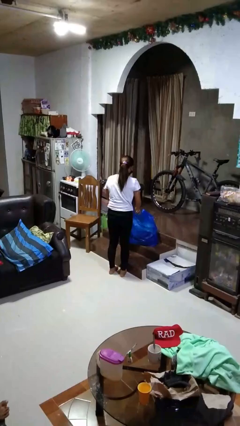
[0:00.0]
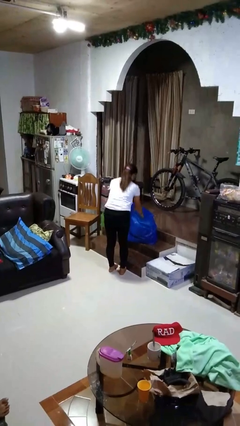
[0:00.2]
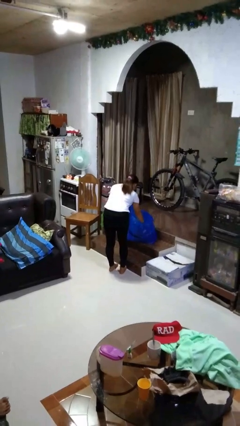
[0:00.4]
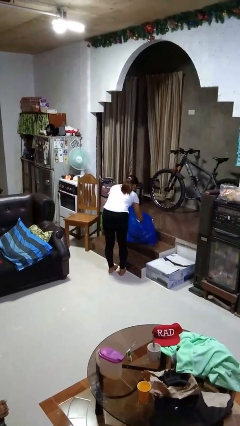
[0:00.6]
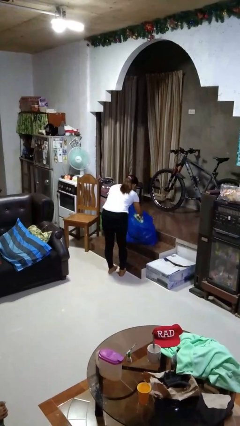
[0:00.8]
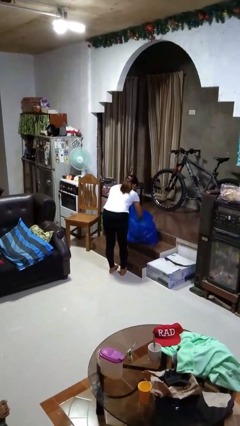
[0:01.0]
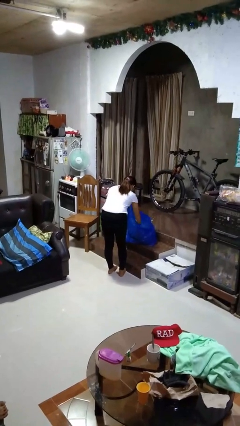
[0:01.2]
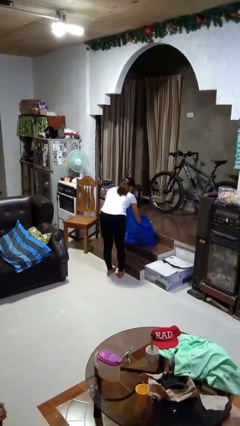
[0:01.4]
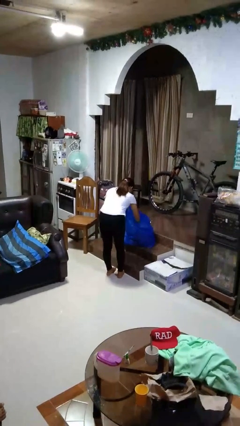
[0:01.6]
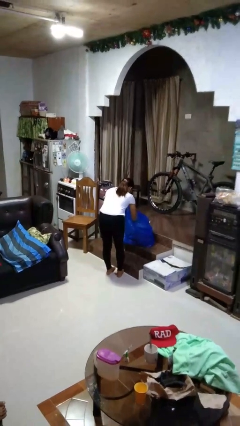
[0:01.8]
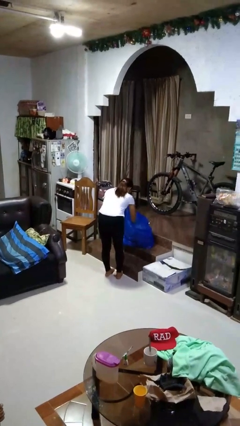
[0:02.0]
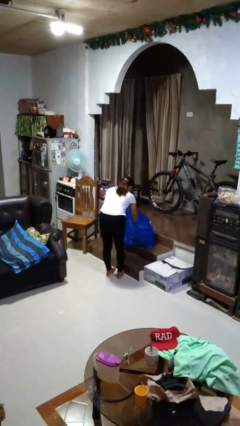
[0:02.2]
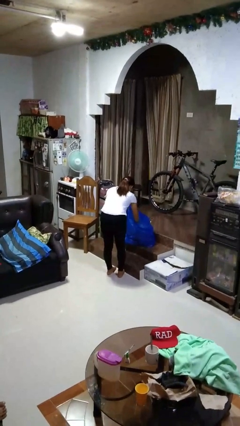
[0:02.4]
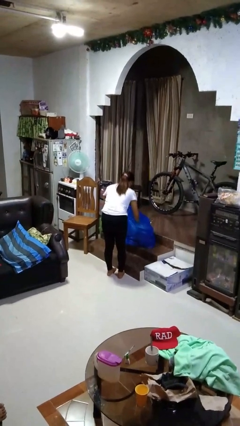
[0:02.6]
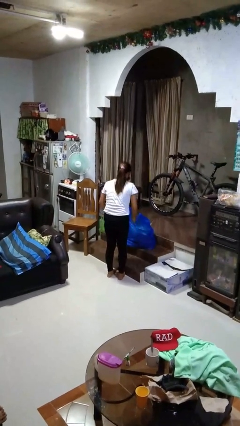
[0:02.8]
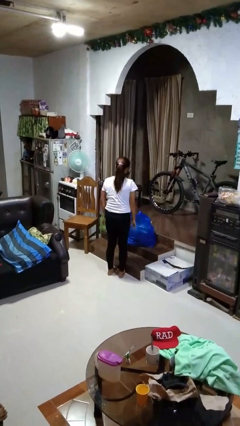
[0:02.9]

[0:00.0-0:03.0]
person searches in bag

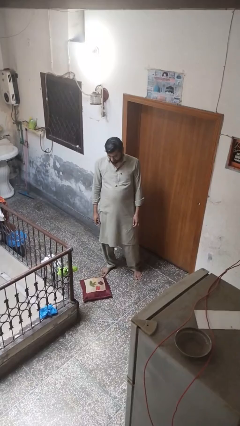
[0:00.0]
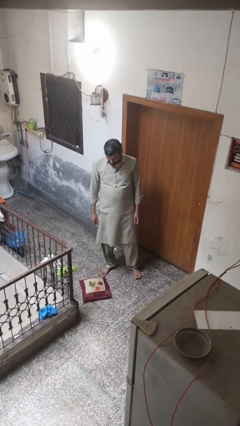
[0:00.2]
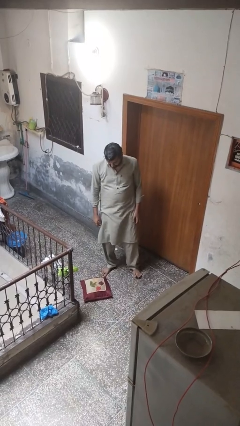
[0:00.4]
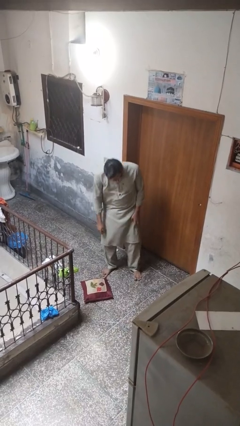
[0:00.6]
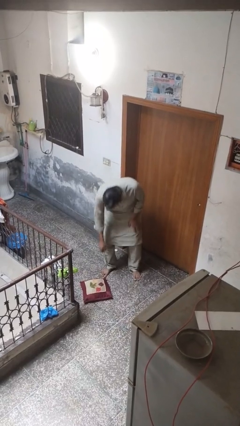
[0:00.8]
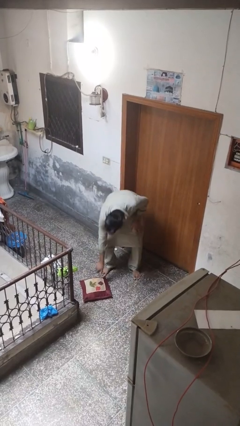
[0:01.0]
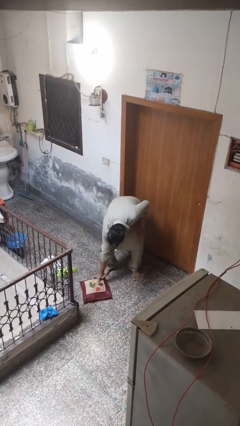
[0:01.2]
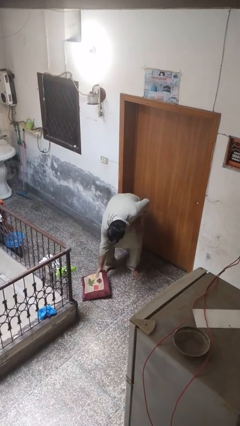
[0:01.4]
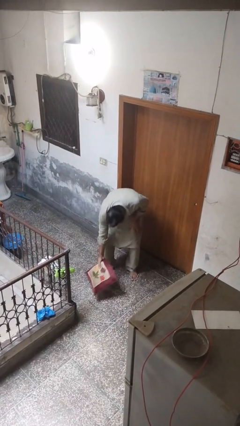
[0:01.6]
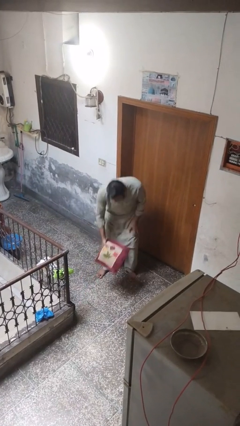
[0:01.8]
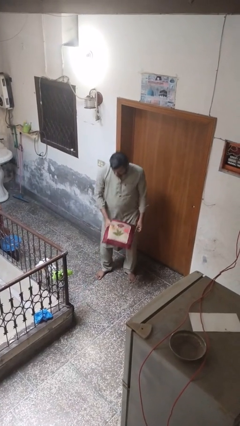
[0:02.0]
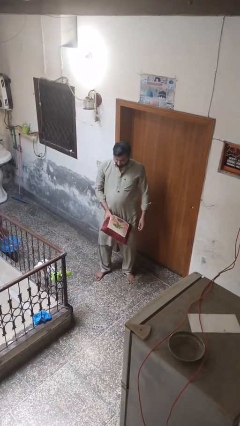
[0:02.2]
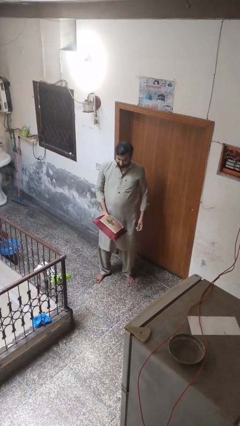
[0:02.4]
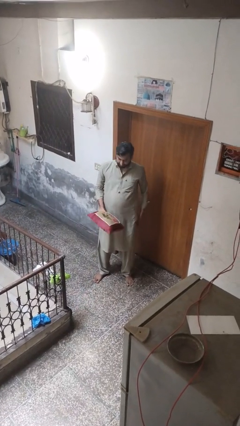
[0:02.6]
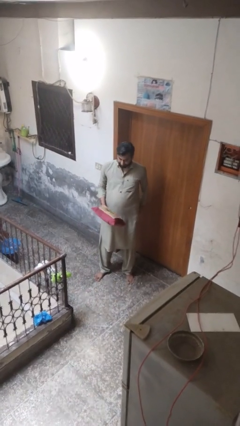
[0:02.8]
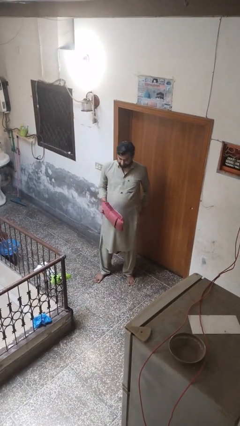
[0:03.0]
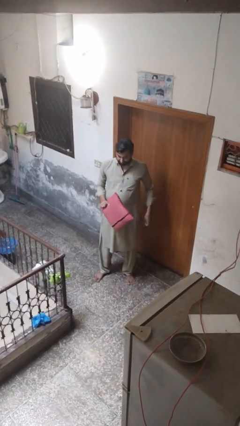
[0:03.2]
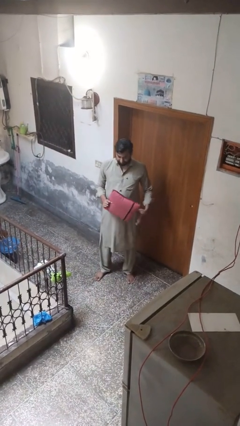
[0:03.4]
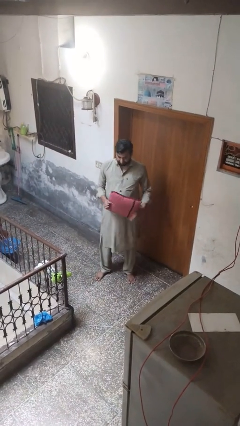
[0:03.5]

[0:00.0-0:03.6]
person picks up object from floor

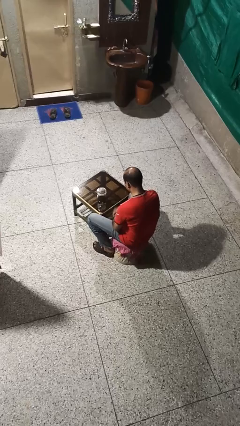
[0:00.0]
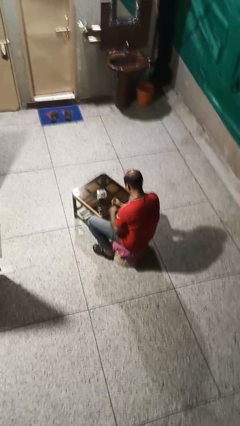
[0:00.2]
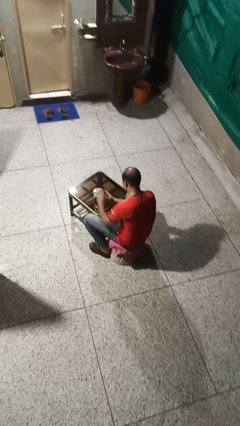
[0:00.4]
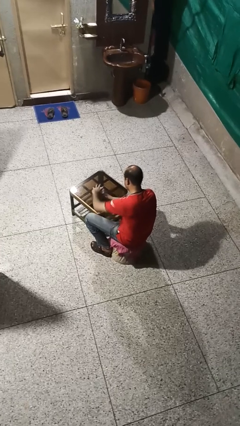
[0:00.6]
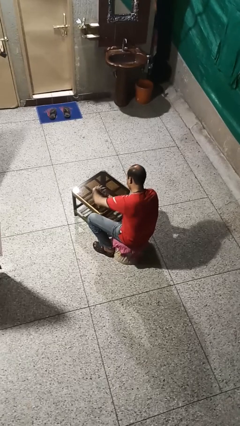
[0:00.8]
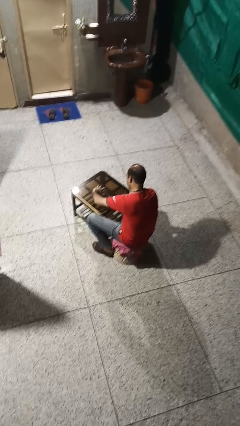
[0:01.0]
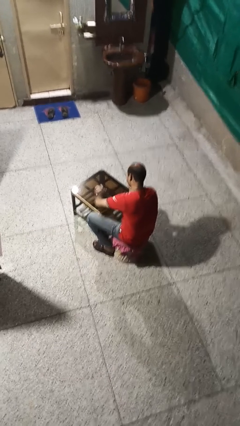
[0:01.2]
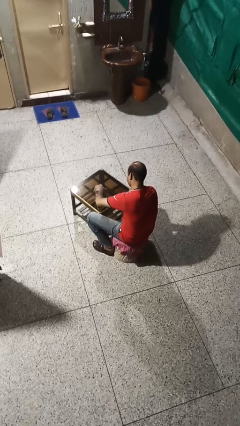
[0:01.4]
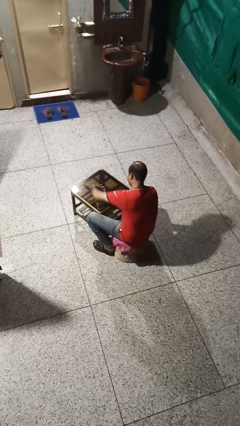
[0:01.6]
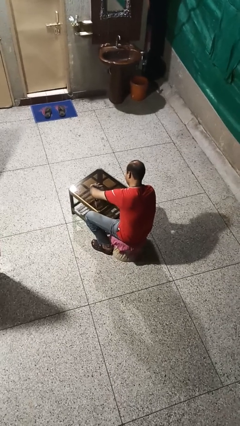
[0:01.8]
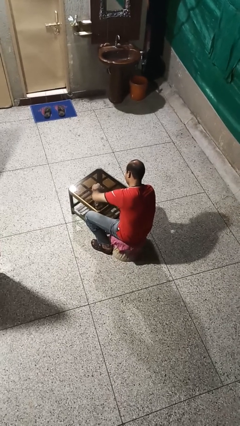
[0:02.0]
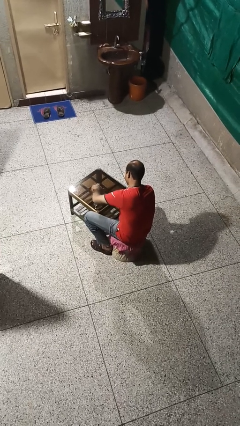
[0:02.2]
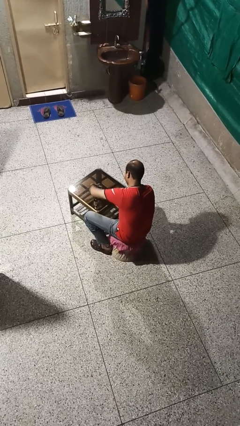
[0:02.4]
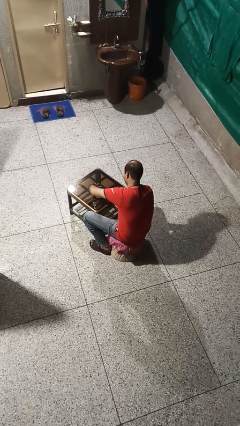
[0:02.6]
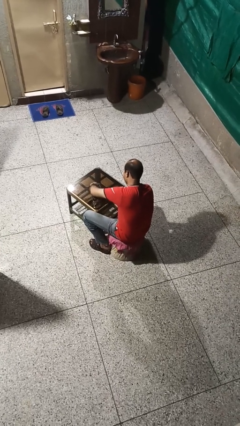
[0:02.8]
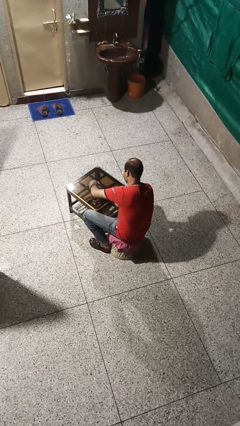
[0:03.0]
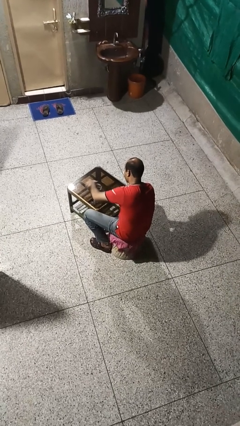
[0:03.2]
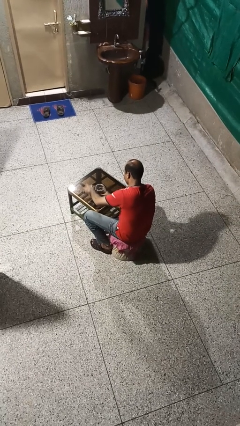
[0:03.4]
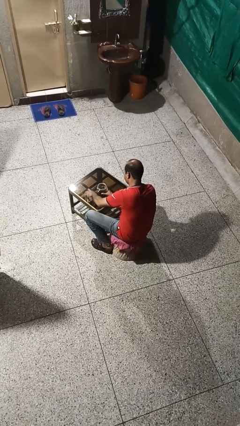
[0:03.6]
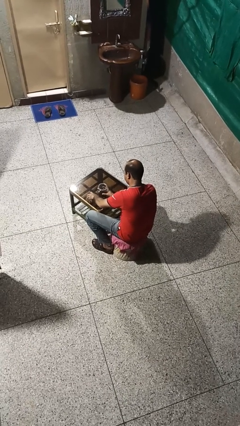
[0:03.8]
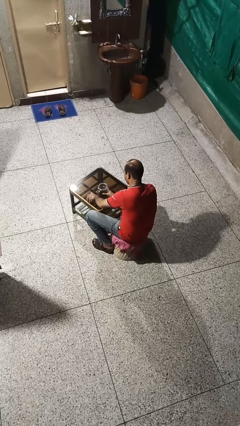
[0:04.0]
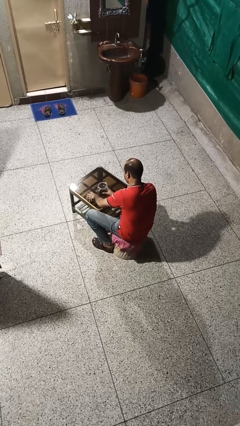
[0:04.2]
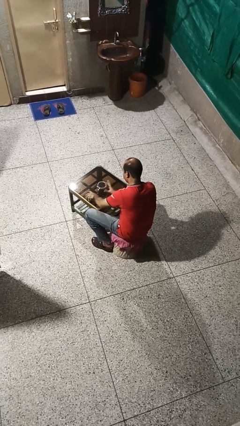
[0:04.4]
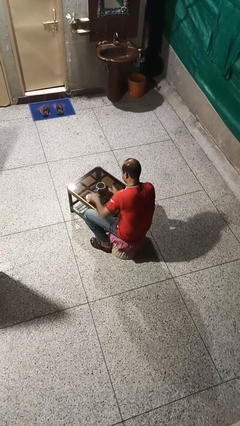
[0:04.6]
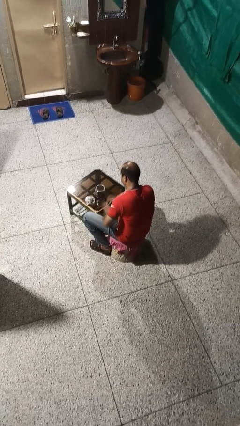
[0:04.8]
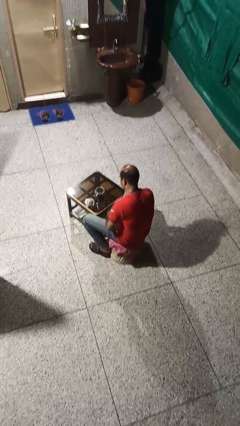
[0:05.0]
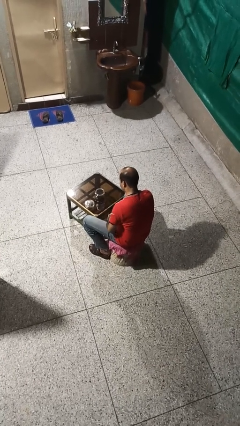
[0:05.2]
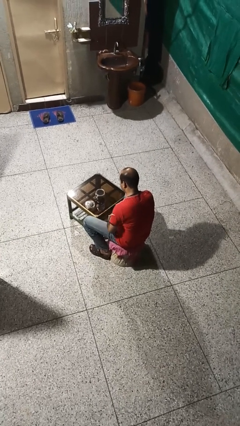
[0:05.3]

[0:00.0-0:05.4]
person opens jar

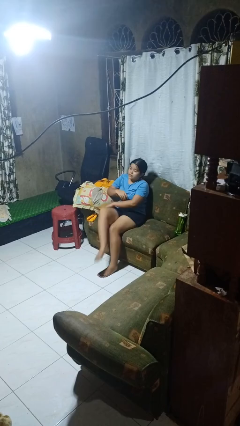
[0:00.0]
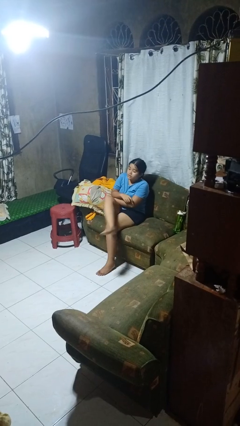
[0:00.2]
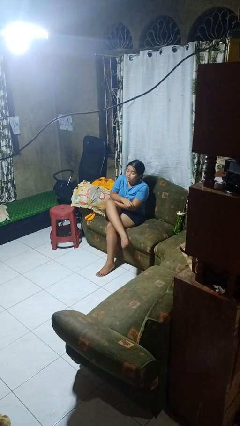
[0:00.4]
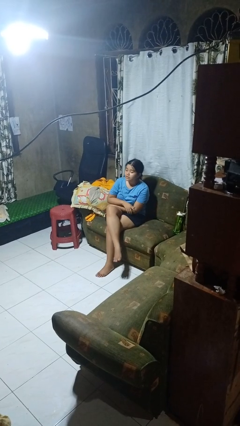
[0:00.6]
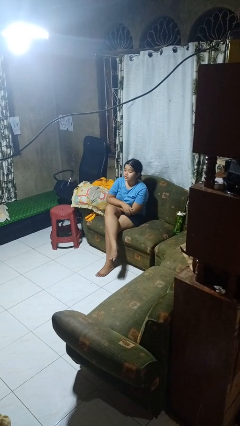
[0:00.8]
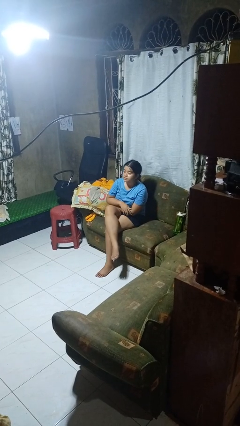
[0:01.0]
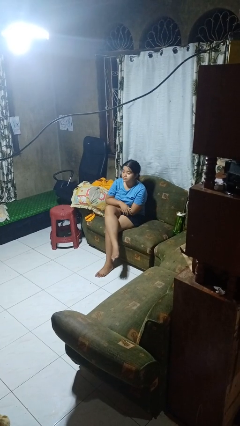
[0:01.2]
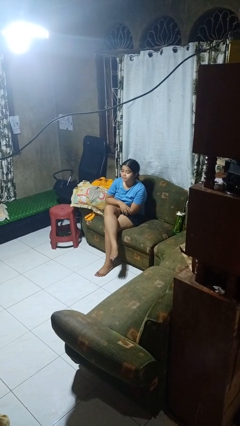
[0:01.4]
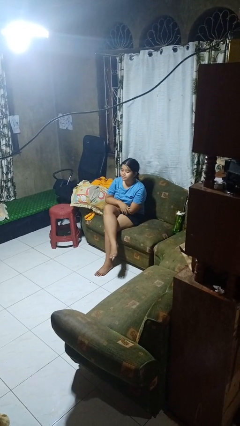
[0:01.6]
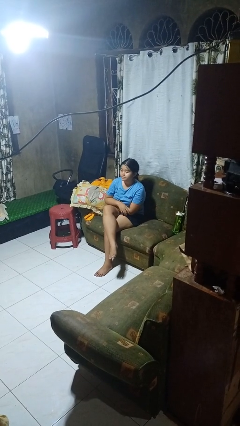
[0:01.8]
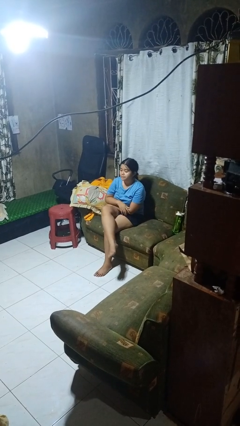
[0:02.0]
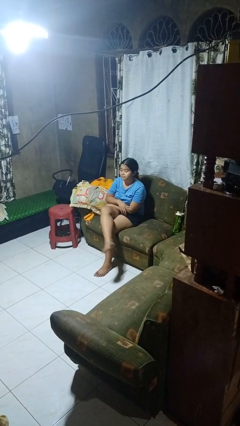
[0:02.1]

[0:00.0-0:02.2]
person crosses legs

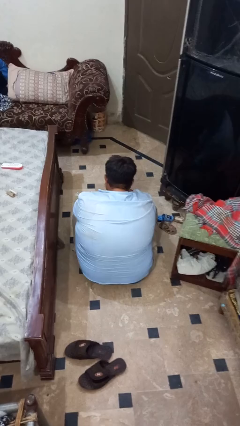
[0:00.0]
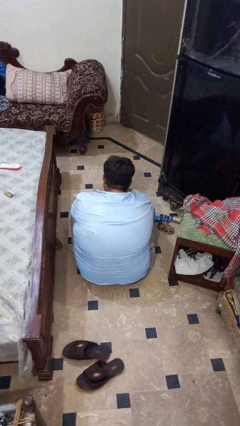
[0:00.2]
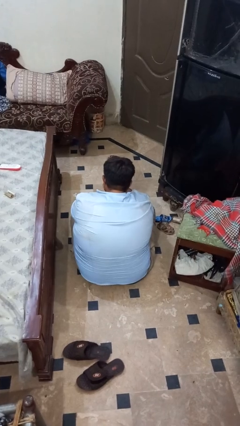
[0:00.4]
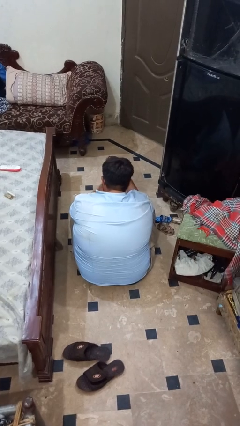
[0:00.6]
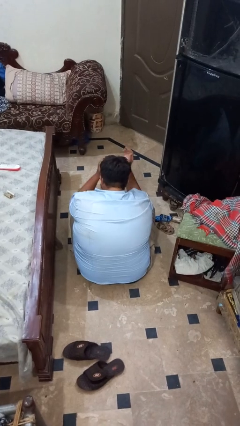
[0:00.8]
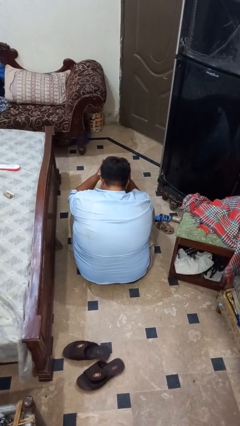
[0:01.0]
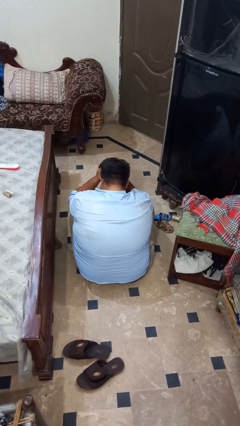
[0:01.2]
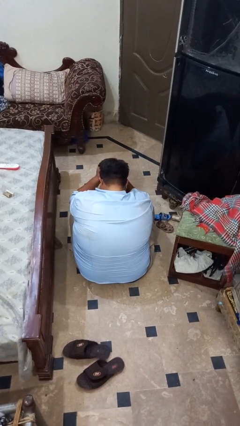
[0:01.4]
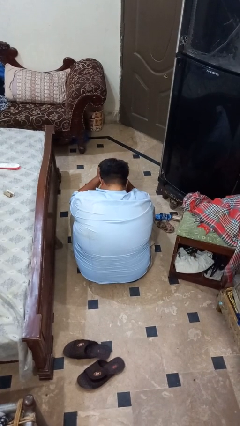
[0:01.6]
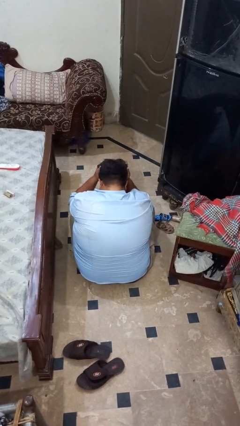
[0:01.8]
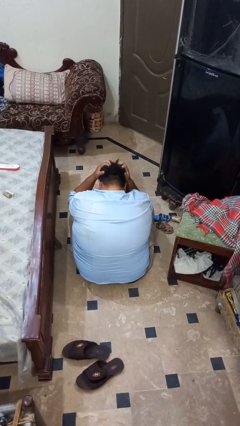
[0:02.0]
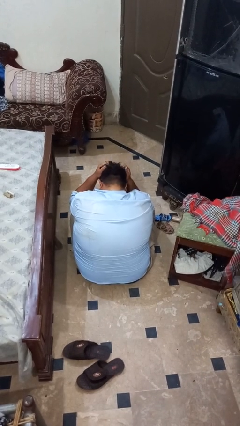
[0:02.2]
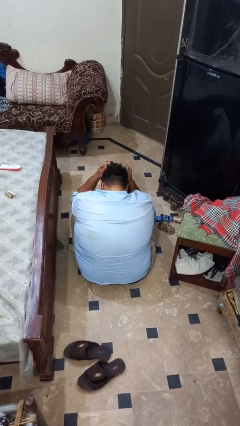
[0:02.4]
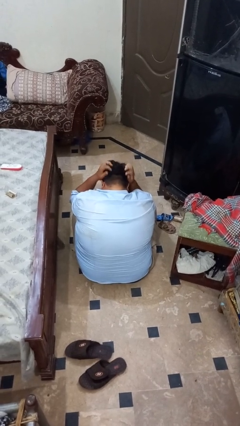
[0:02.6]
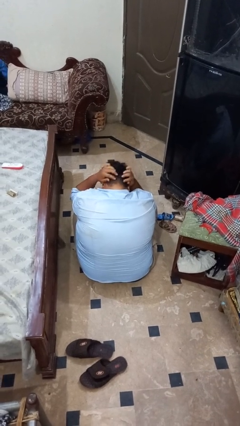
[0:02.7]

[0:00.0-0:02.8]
person strokes hair

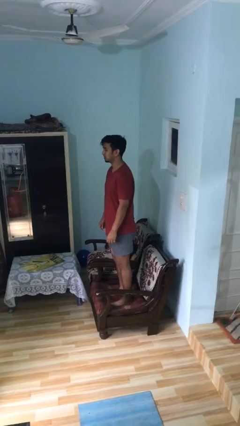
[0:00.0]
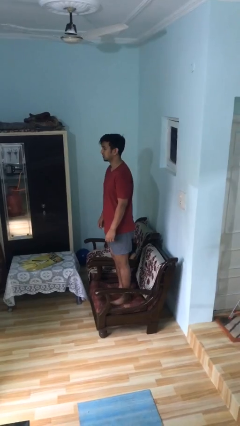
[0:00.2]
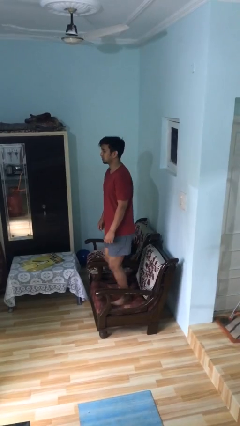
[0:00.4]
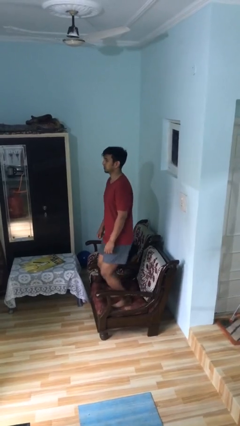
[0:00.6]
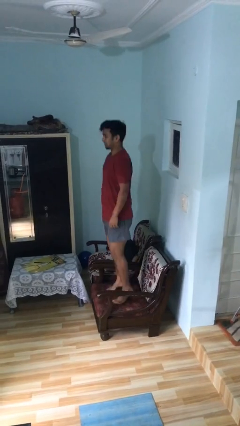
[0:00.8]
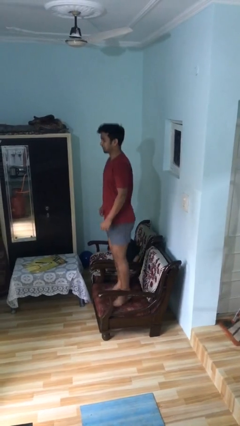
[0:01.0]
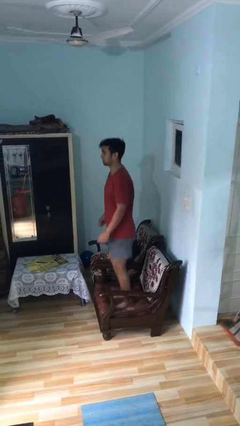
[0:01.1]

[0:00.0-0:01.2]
person jumps on couch
